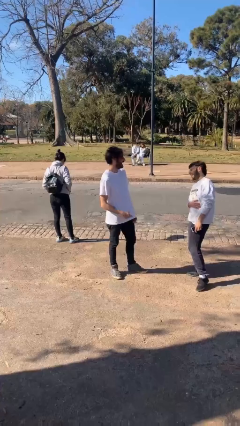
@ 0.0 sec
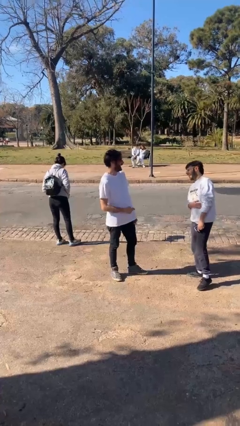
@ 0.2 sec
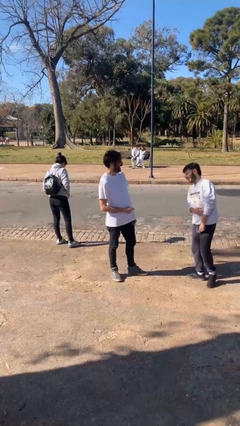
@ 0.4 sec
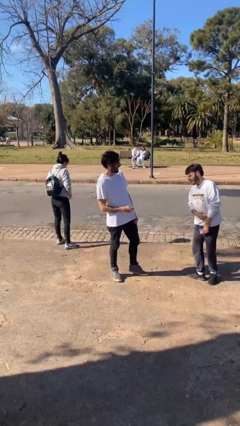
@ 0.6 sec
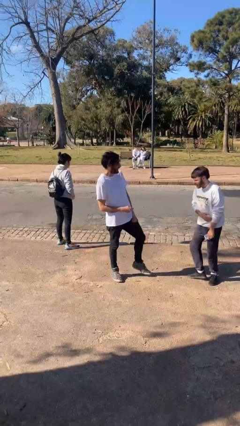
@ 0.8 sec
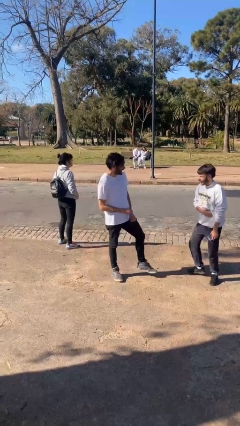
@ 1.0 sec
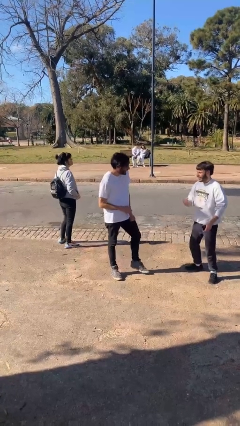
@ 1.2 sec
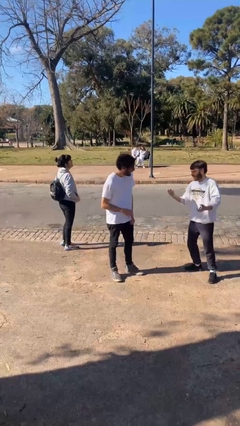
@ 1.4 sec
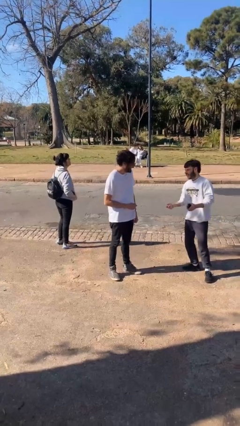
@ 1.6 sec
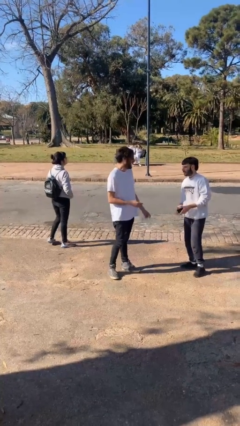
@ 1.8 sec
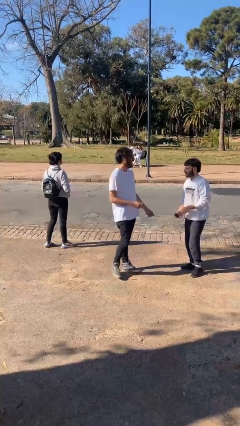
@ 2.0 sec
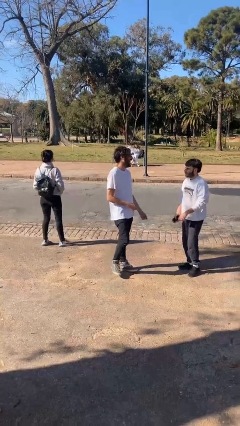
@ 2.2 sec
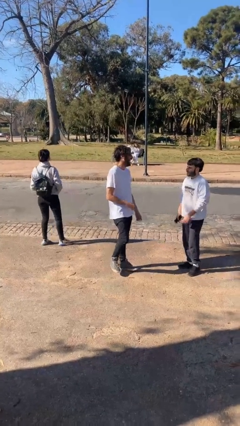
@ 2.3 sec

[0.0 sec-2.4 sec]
person laughs with person

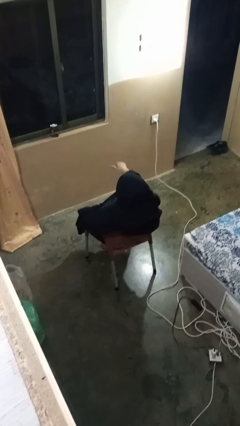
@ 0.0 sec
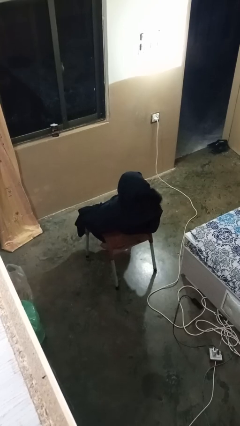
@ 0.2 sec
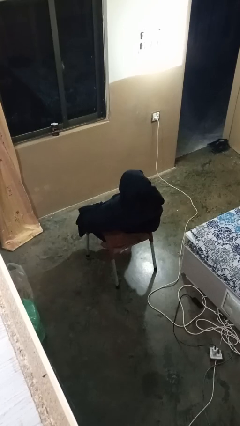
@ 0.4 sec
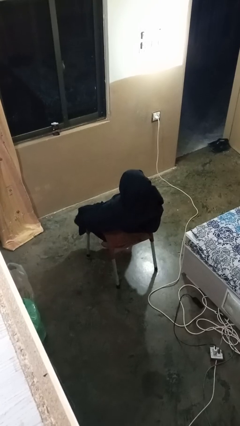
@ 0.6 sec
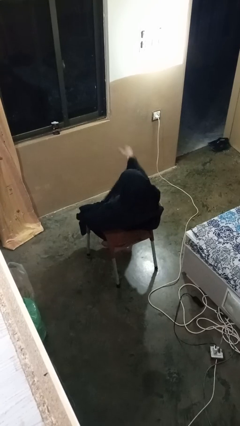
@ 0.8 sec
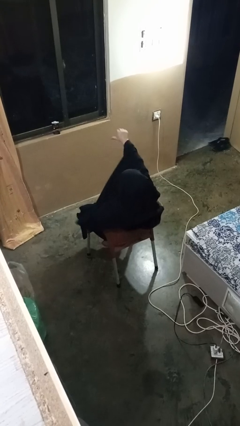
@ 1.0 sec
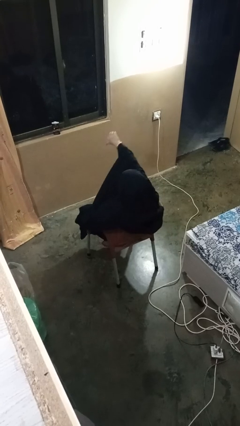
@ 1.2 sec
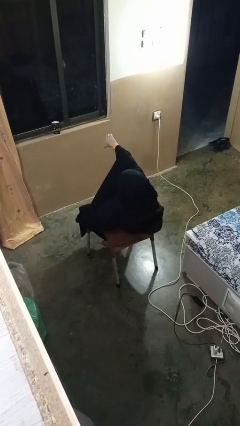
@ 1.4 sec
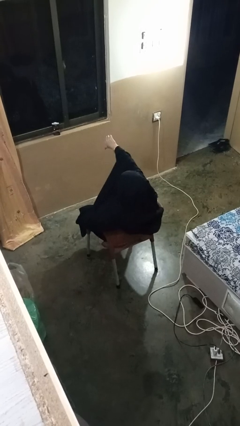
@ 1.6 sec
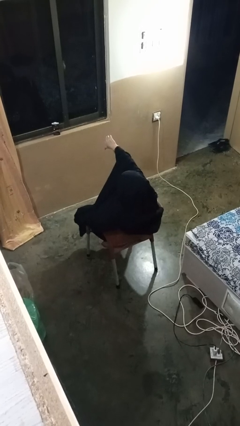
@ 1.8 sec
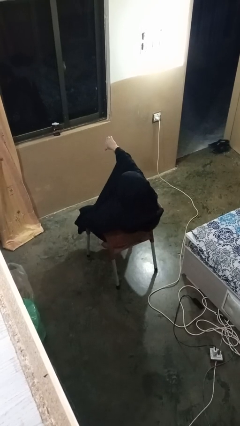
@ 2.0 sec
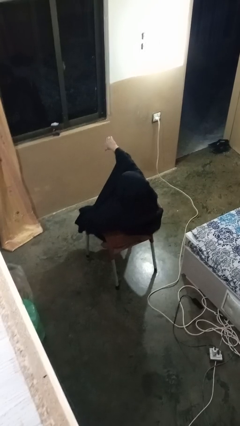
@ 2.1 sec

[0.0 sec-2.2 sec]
person gestures thumbs down

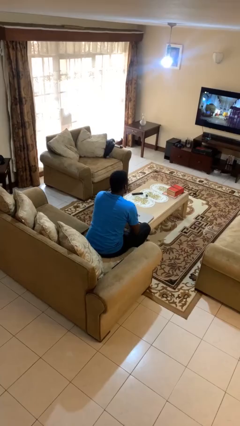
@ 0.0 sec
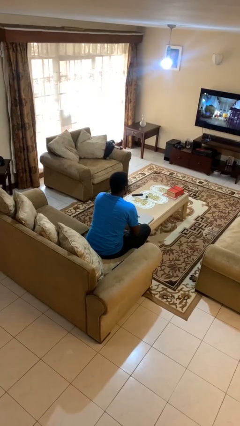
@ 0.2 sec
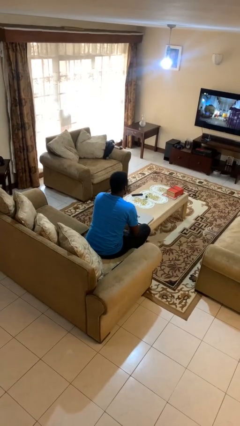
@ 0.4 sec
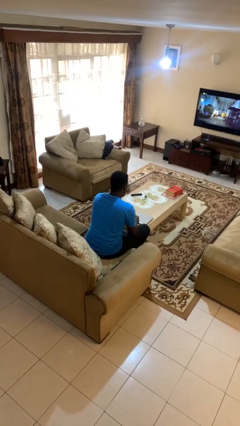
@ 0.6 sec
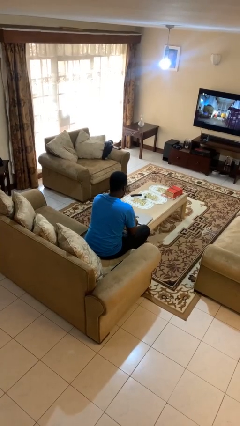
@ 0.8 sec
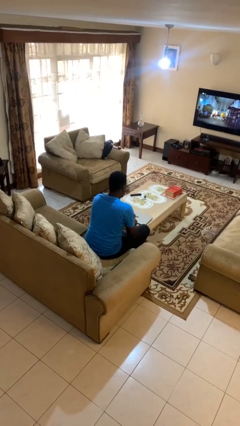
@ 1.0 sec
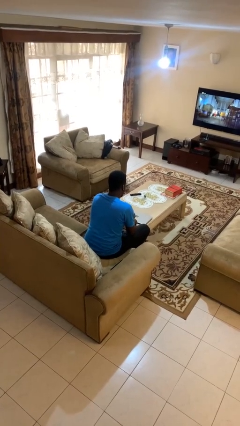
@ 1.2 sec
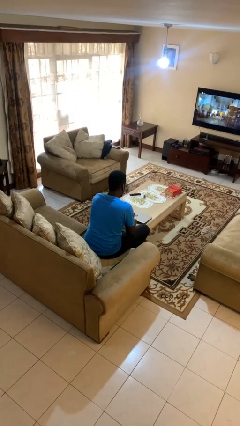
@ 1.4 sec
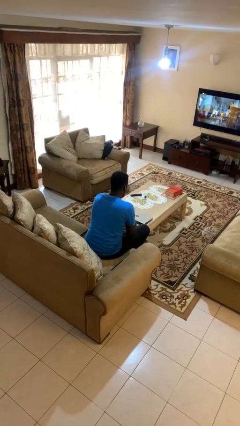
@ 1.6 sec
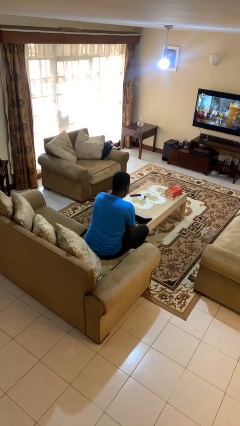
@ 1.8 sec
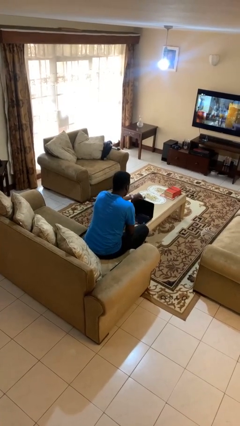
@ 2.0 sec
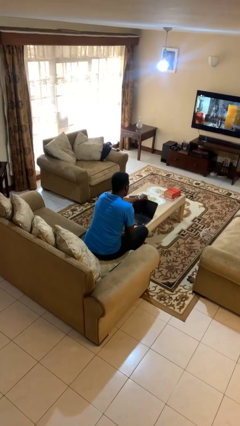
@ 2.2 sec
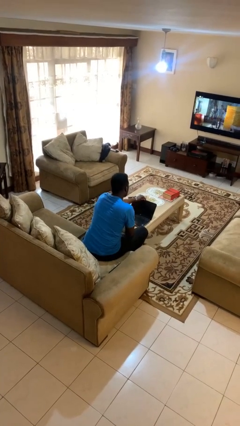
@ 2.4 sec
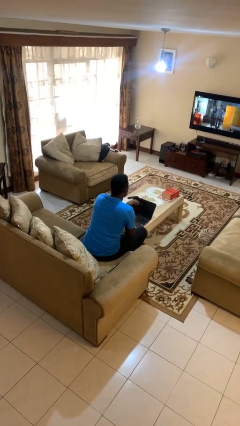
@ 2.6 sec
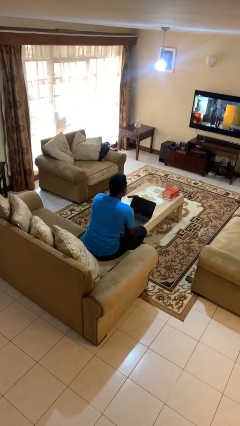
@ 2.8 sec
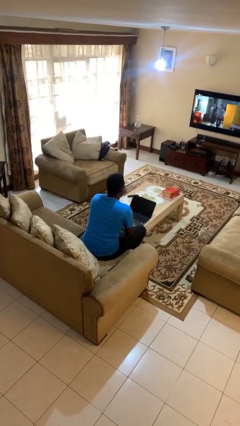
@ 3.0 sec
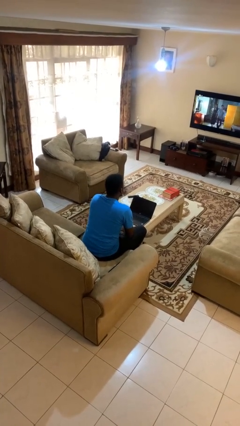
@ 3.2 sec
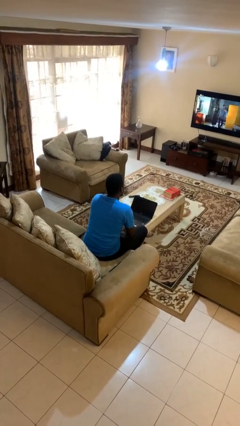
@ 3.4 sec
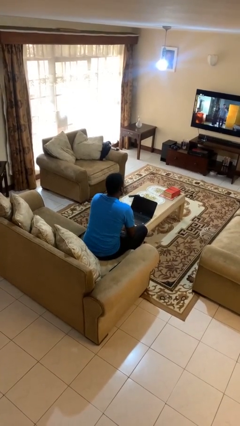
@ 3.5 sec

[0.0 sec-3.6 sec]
person opens laptop

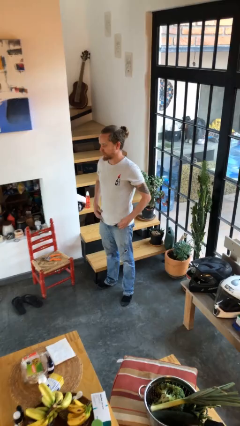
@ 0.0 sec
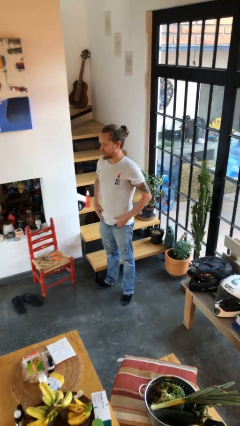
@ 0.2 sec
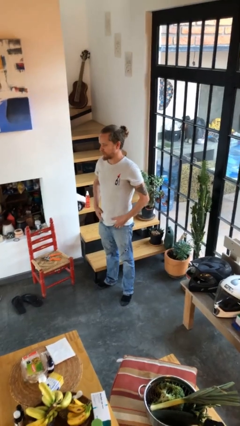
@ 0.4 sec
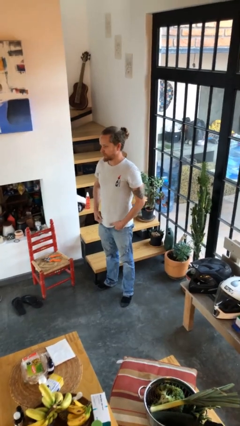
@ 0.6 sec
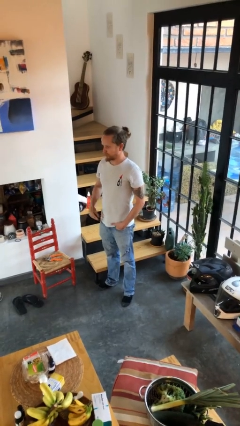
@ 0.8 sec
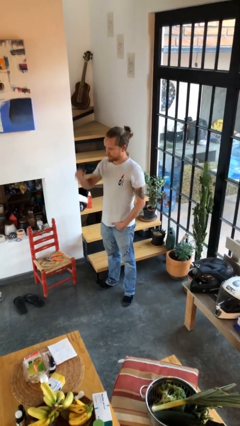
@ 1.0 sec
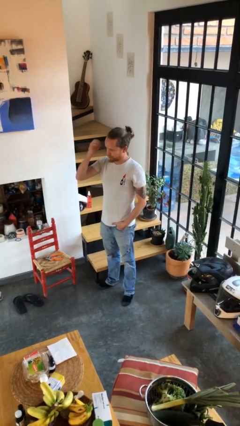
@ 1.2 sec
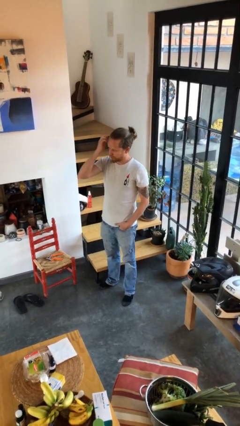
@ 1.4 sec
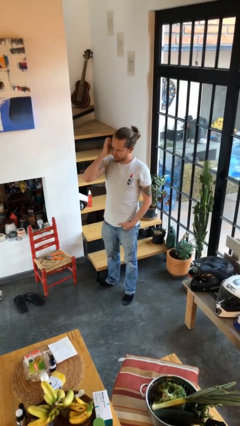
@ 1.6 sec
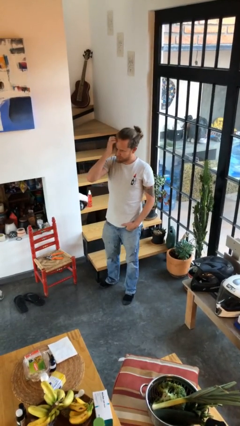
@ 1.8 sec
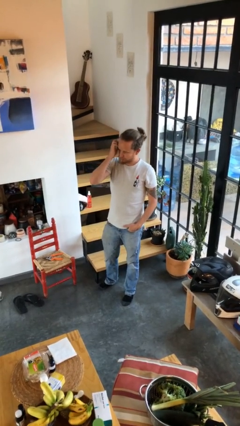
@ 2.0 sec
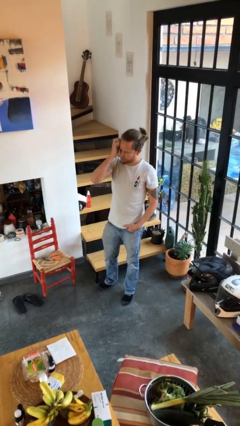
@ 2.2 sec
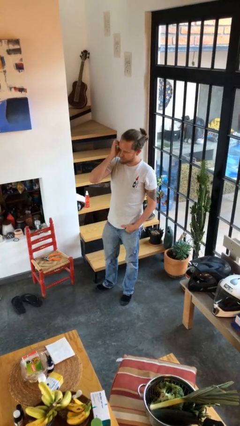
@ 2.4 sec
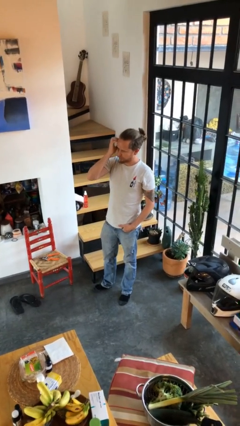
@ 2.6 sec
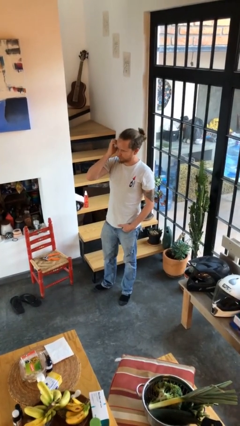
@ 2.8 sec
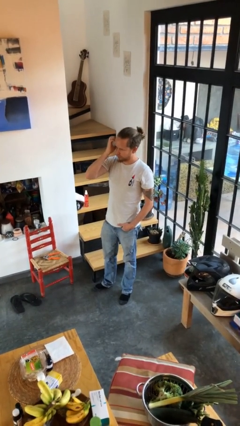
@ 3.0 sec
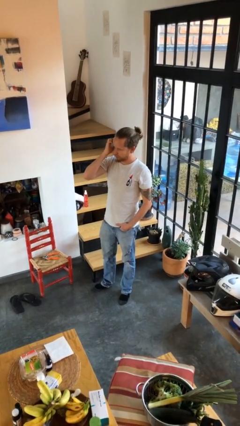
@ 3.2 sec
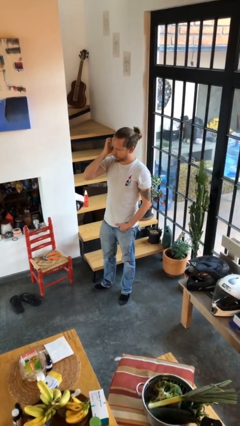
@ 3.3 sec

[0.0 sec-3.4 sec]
person scratches face

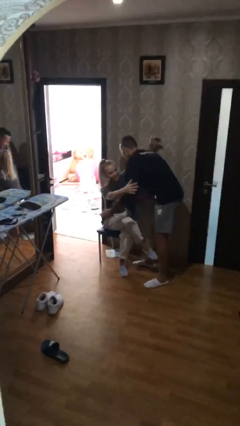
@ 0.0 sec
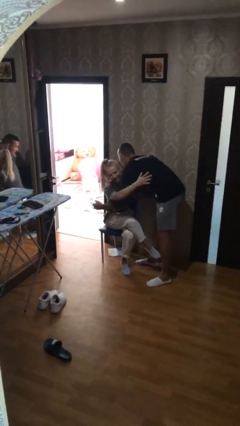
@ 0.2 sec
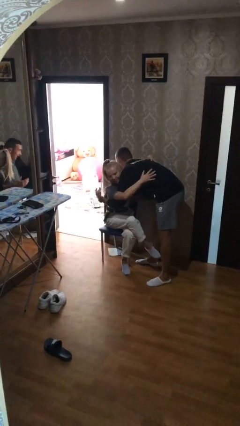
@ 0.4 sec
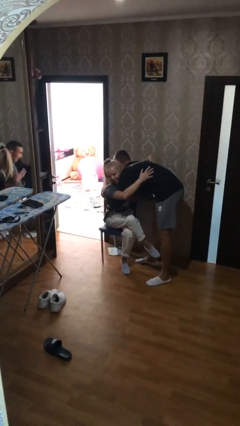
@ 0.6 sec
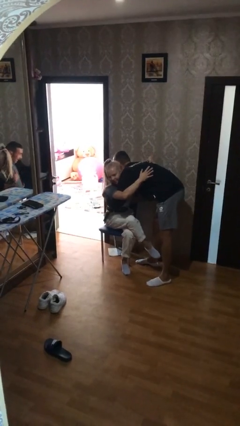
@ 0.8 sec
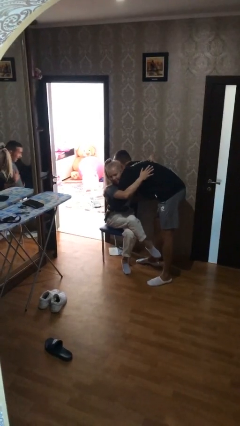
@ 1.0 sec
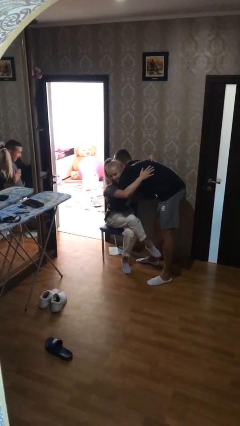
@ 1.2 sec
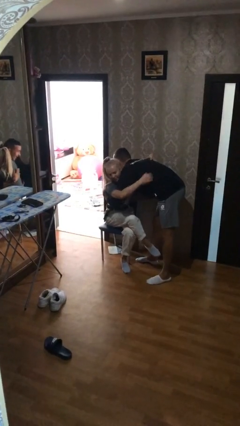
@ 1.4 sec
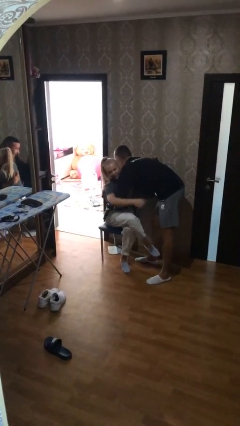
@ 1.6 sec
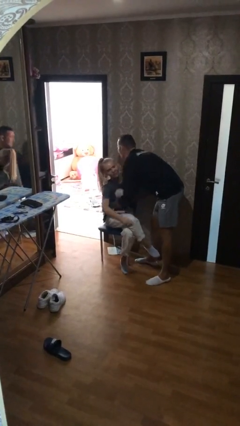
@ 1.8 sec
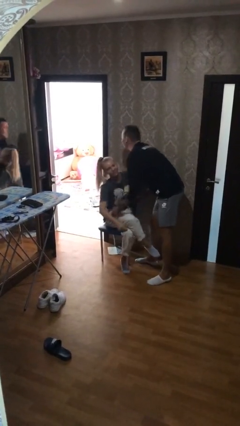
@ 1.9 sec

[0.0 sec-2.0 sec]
person embraces person

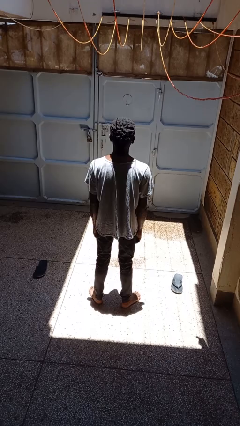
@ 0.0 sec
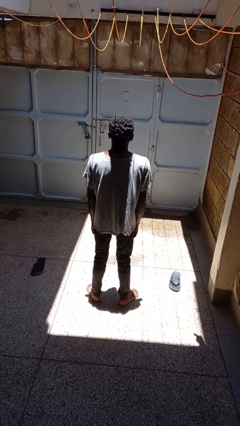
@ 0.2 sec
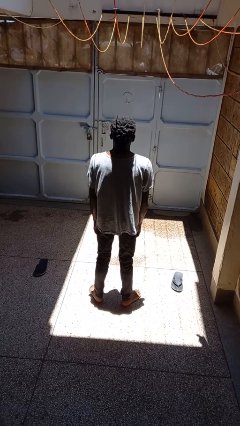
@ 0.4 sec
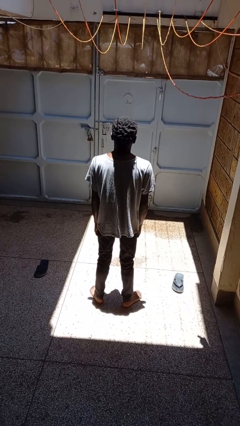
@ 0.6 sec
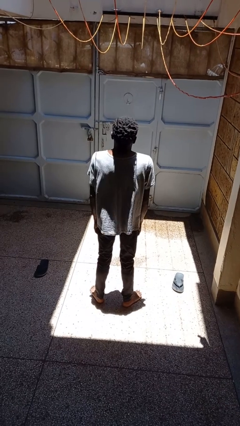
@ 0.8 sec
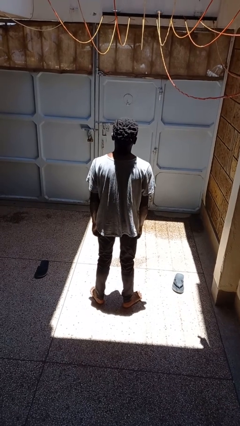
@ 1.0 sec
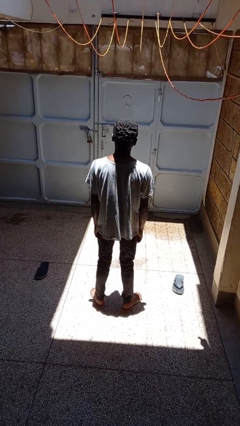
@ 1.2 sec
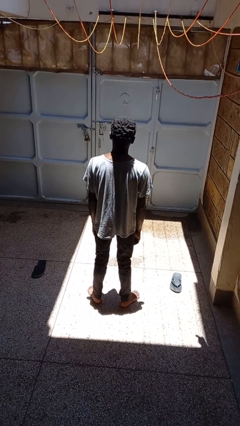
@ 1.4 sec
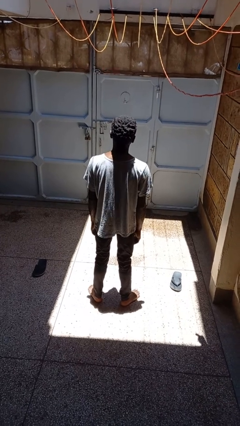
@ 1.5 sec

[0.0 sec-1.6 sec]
person shrugs

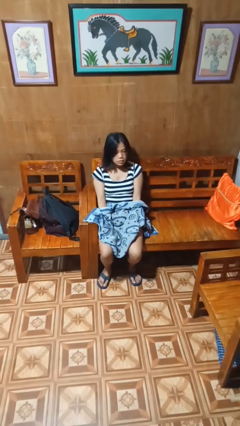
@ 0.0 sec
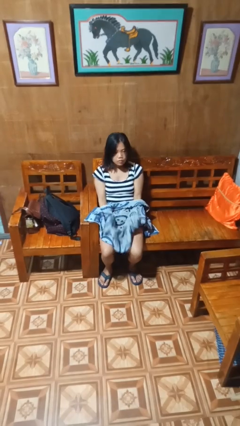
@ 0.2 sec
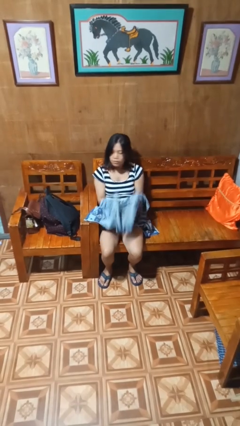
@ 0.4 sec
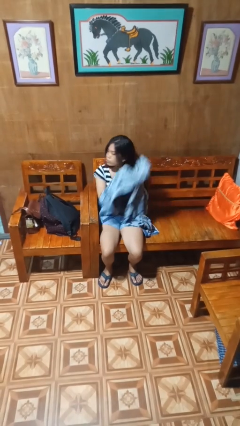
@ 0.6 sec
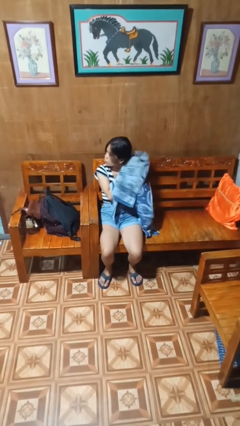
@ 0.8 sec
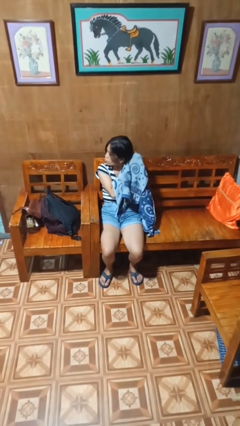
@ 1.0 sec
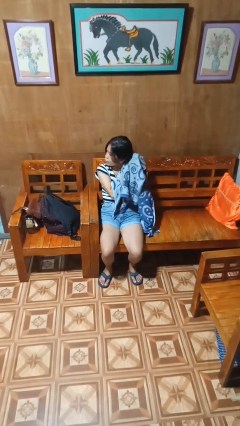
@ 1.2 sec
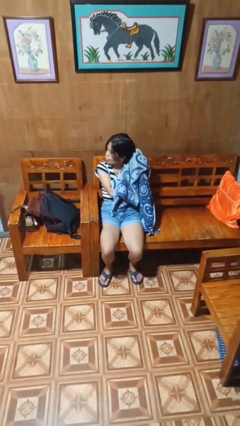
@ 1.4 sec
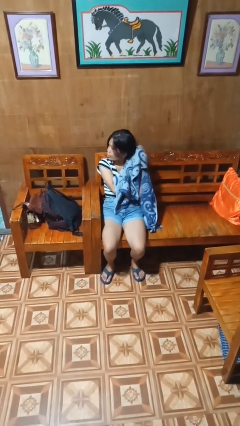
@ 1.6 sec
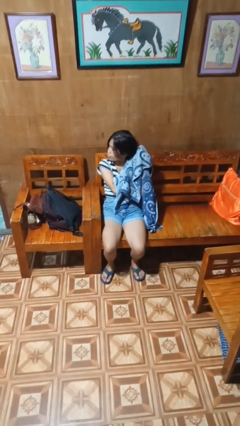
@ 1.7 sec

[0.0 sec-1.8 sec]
person dries hair with towel
